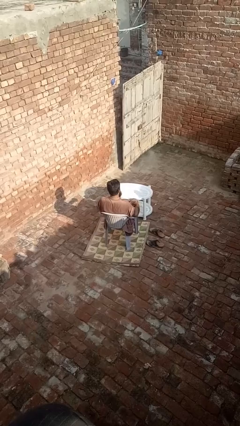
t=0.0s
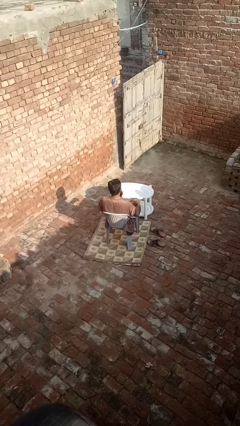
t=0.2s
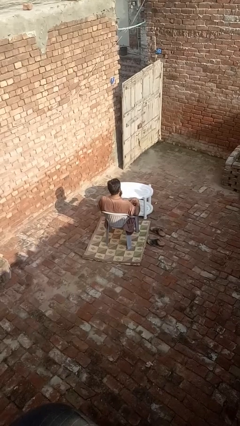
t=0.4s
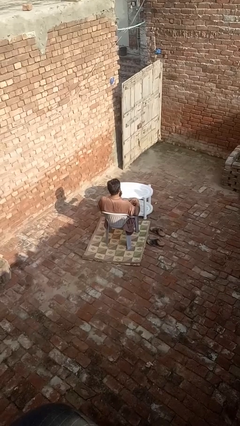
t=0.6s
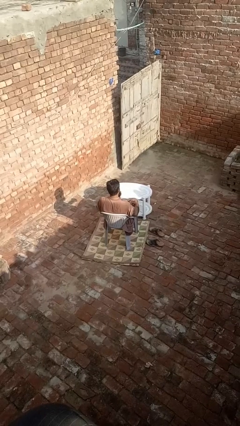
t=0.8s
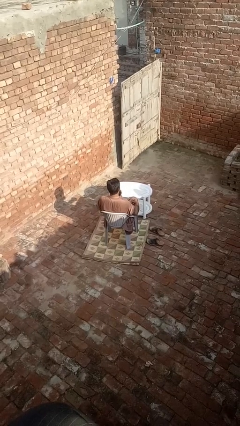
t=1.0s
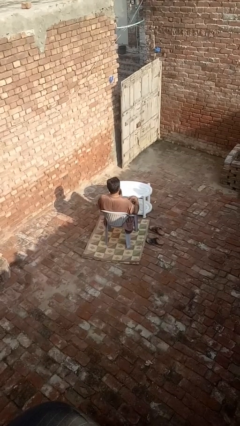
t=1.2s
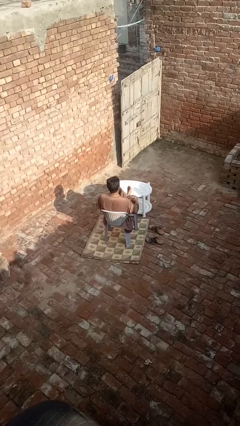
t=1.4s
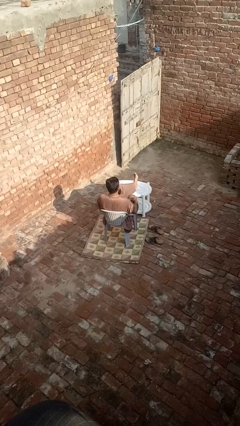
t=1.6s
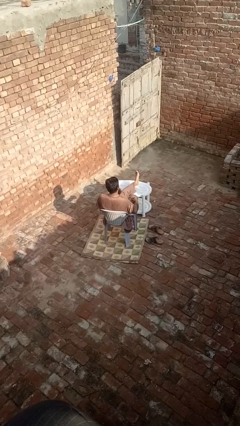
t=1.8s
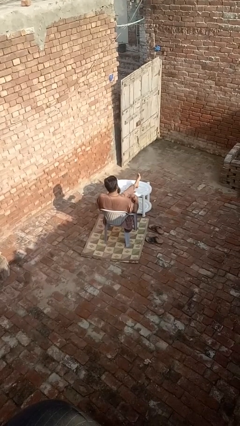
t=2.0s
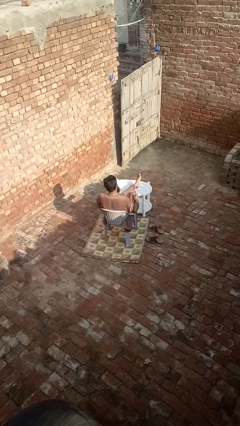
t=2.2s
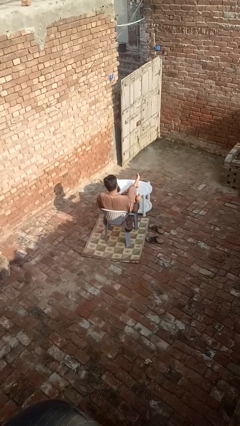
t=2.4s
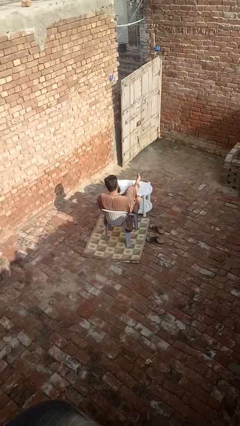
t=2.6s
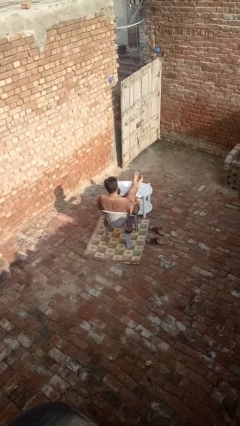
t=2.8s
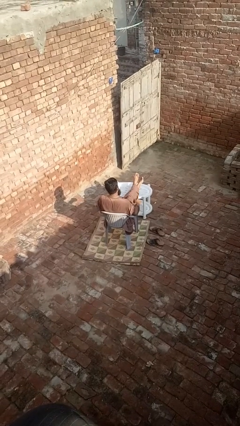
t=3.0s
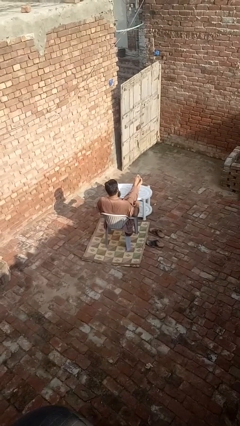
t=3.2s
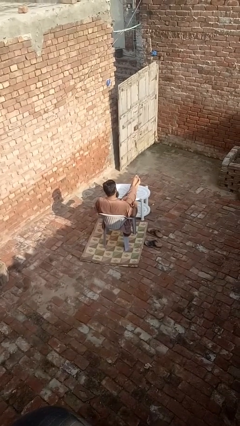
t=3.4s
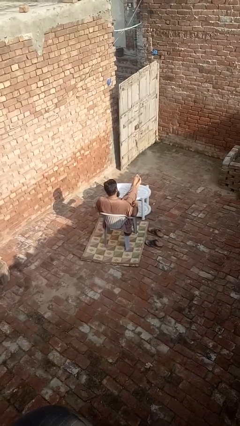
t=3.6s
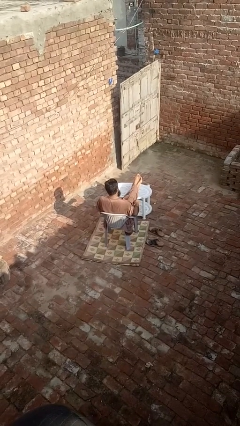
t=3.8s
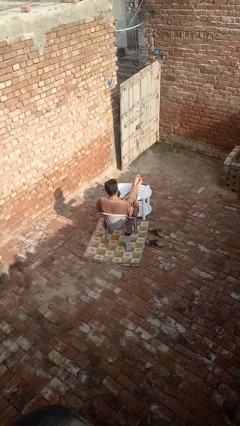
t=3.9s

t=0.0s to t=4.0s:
person puts feet up

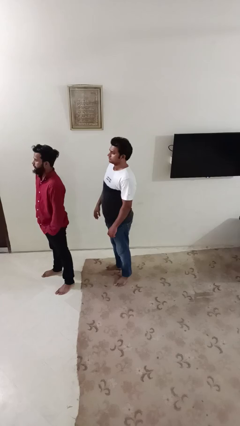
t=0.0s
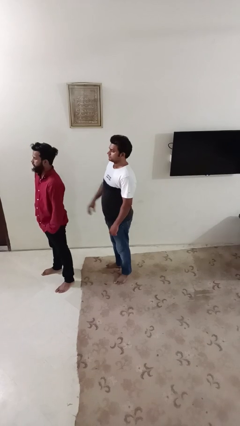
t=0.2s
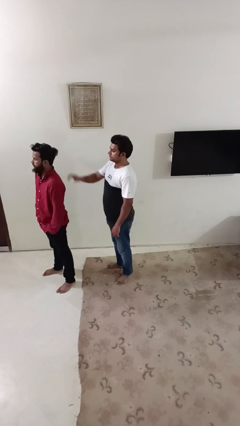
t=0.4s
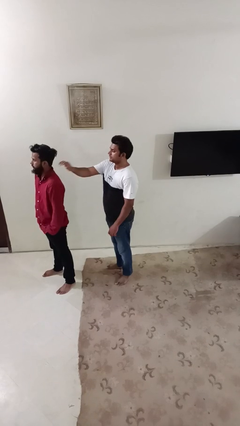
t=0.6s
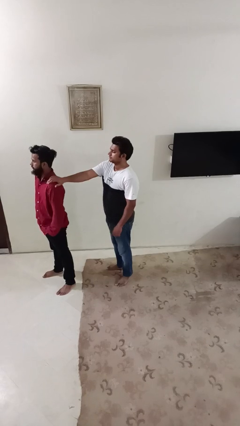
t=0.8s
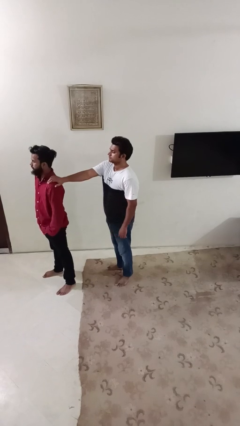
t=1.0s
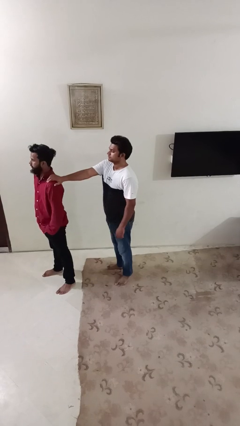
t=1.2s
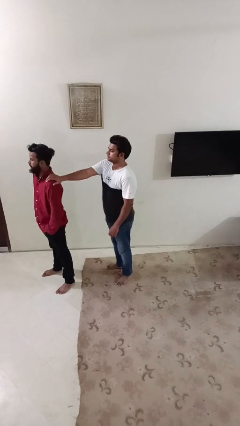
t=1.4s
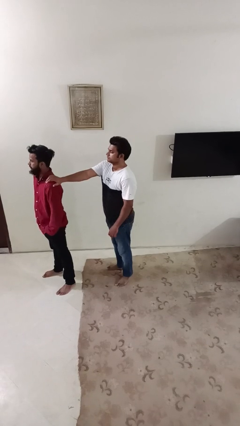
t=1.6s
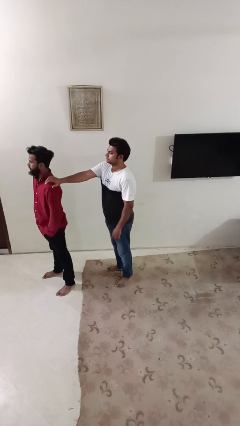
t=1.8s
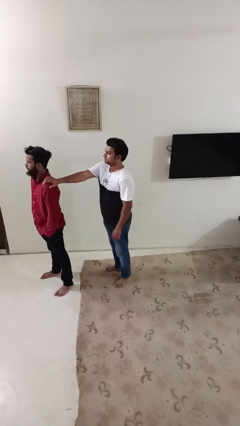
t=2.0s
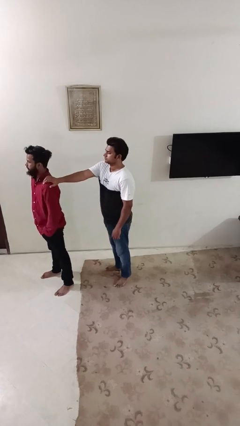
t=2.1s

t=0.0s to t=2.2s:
person grabs person by shoulder

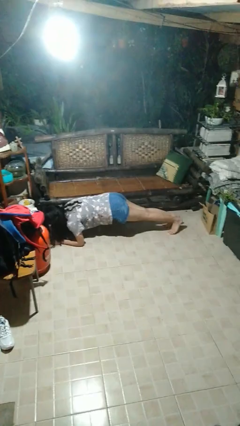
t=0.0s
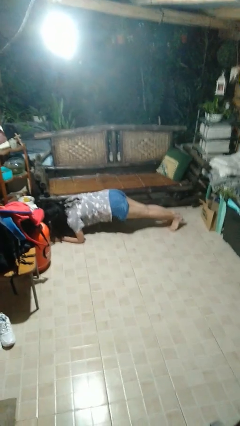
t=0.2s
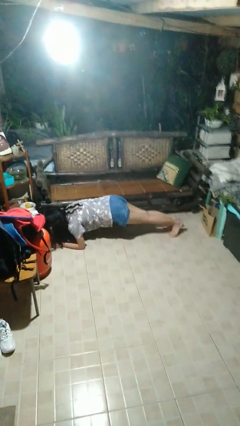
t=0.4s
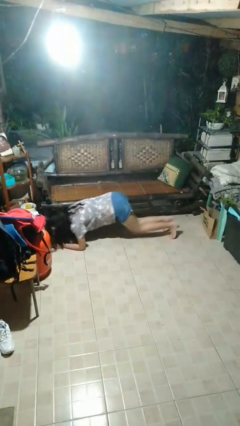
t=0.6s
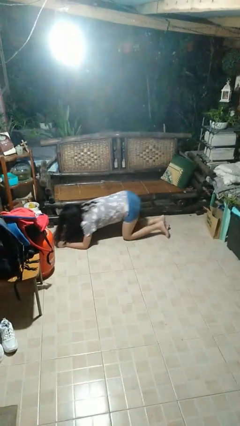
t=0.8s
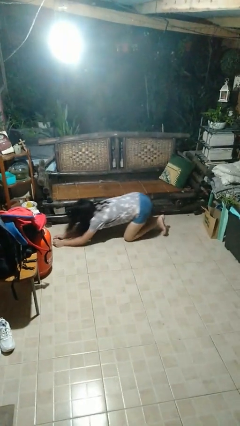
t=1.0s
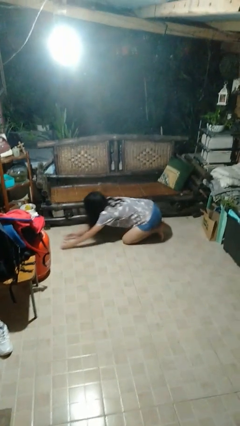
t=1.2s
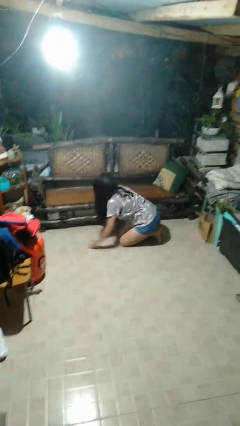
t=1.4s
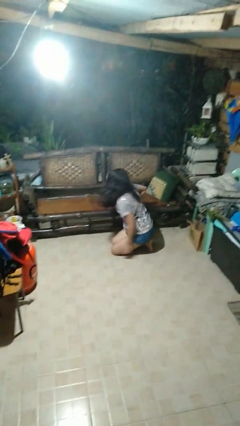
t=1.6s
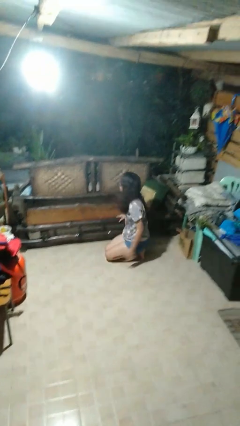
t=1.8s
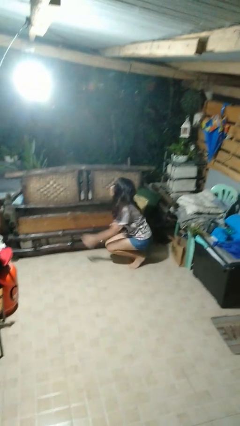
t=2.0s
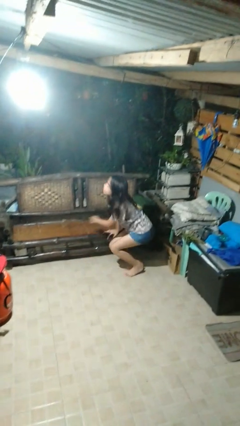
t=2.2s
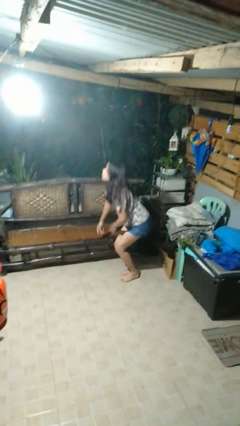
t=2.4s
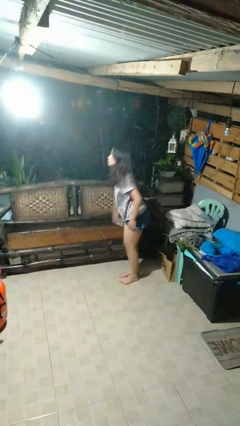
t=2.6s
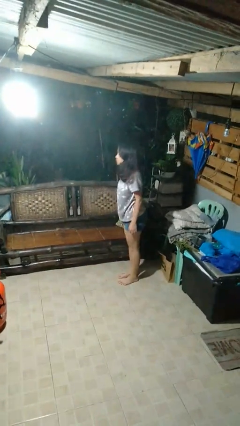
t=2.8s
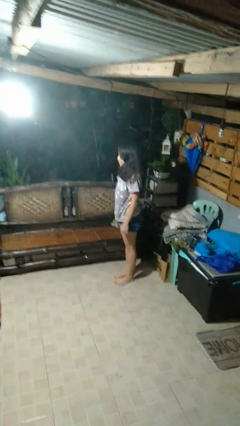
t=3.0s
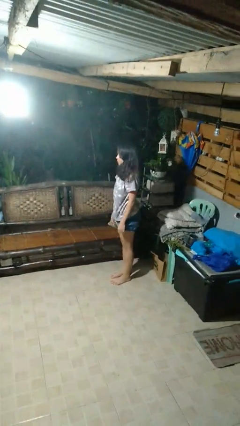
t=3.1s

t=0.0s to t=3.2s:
person stands up from floor

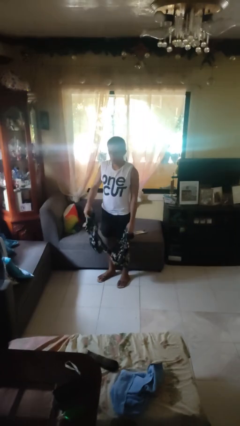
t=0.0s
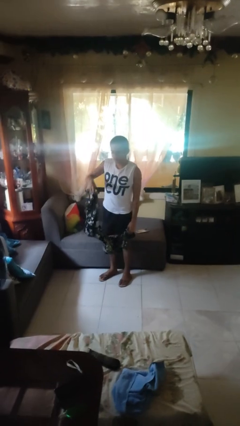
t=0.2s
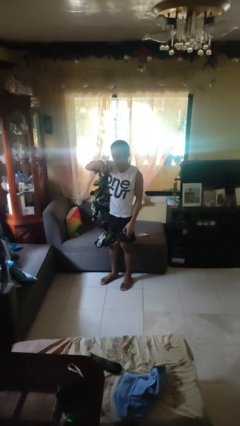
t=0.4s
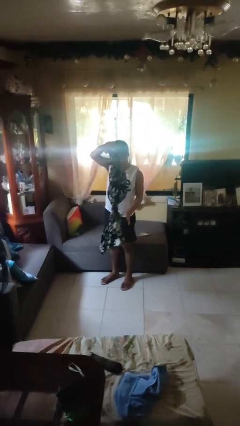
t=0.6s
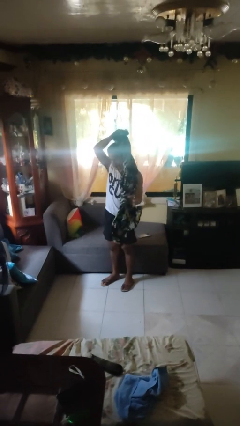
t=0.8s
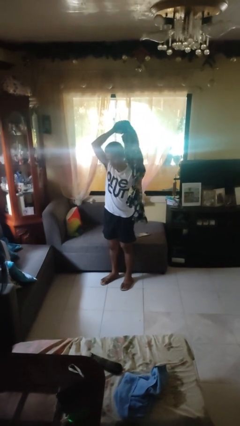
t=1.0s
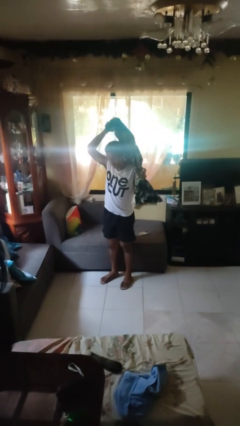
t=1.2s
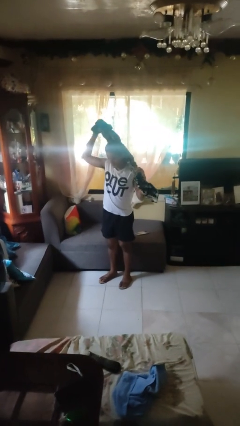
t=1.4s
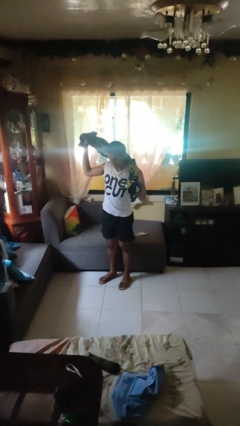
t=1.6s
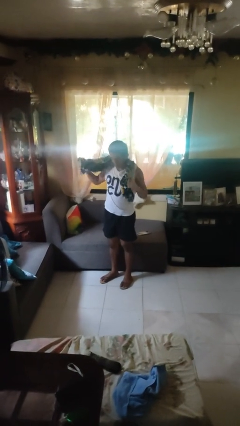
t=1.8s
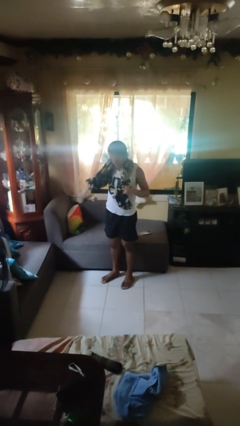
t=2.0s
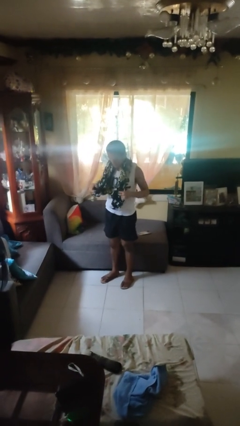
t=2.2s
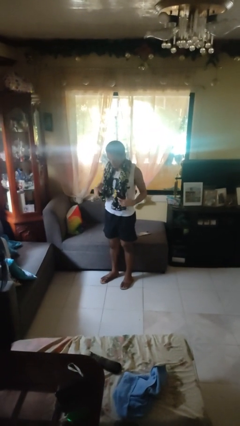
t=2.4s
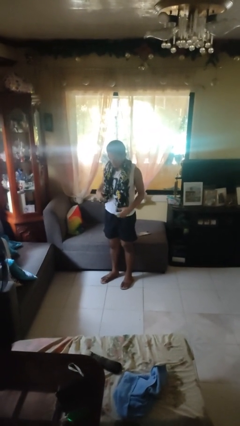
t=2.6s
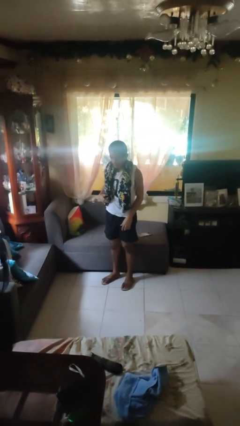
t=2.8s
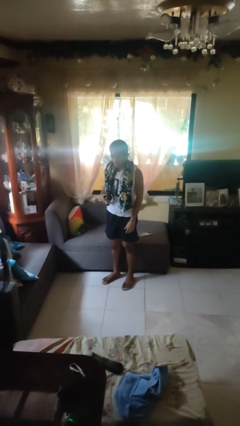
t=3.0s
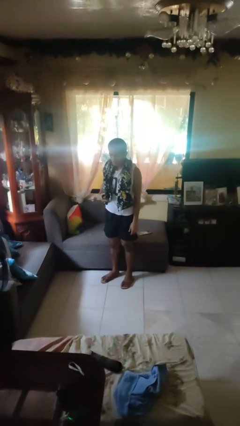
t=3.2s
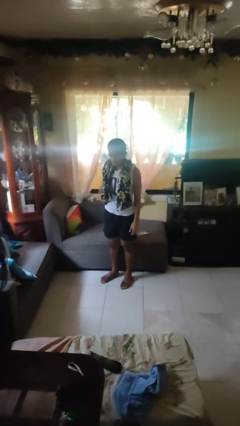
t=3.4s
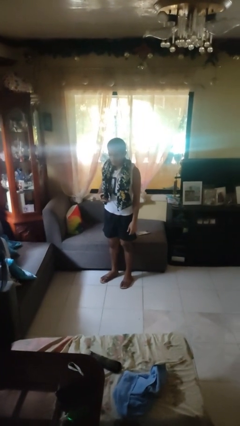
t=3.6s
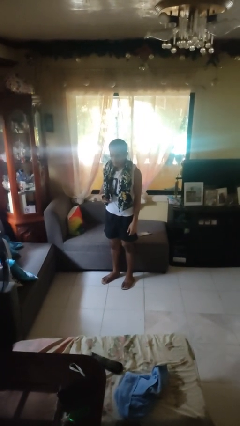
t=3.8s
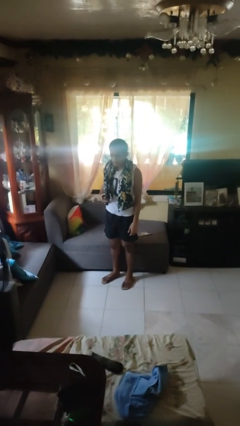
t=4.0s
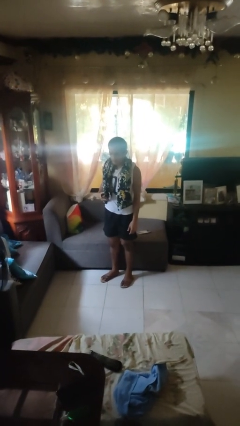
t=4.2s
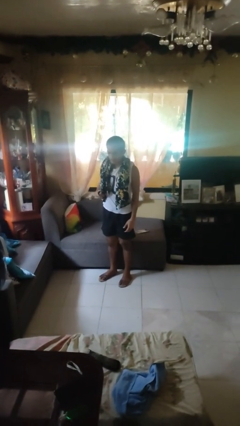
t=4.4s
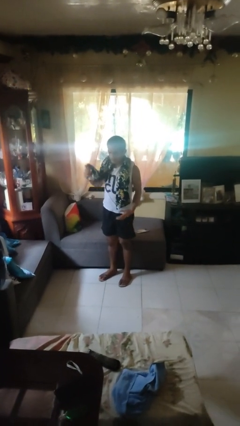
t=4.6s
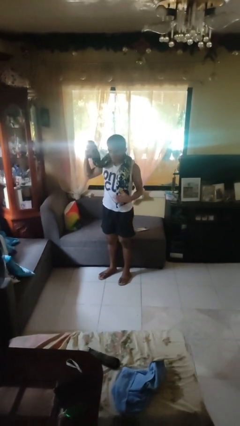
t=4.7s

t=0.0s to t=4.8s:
person puts on scarf

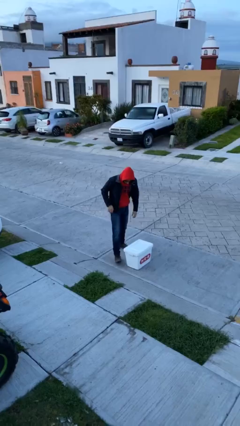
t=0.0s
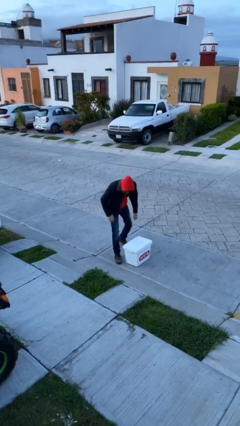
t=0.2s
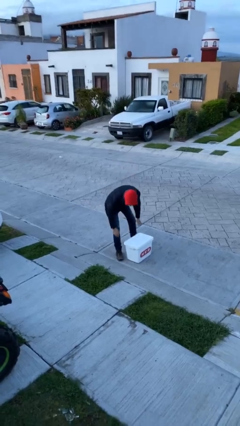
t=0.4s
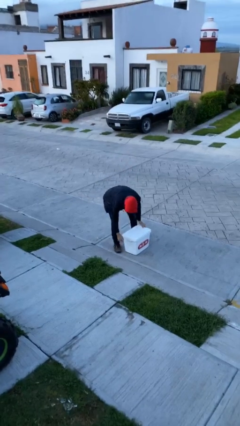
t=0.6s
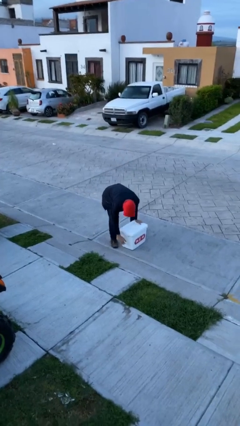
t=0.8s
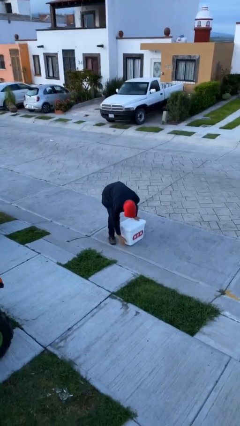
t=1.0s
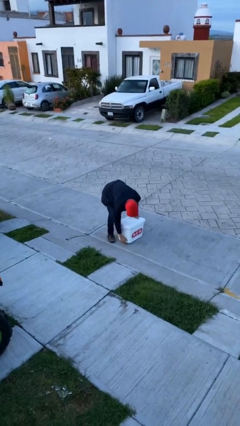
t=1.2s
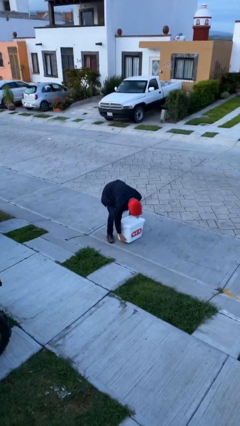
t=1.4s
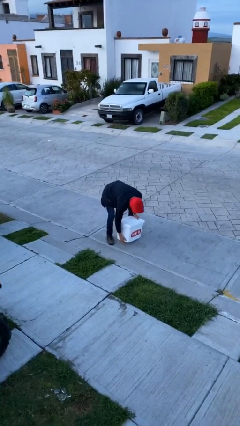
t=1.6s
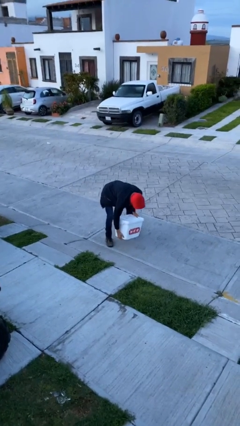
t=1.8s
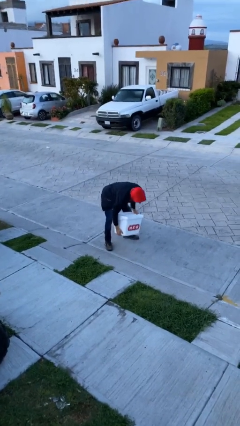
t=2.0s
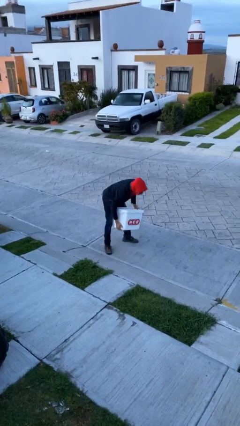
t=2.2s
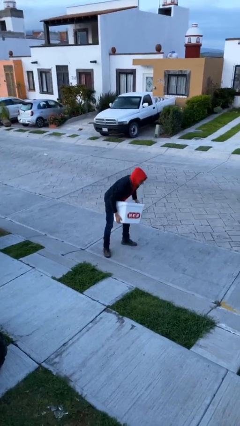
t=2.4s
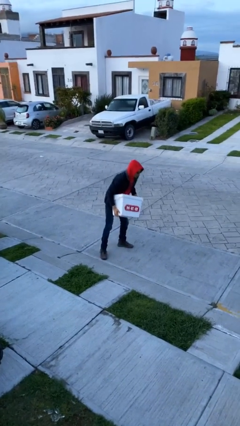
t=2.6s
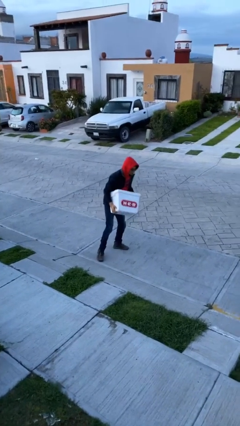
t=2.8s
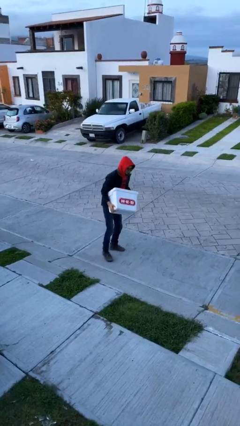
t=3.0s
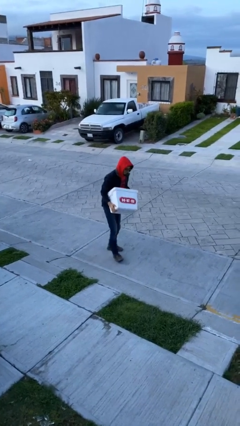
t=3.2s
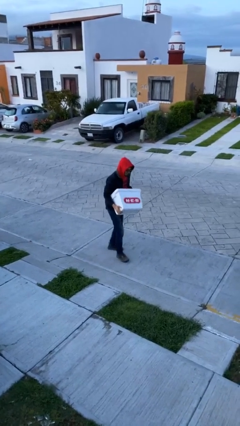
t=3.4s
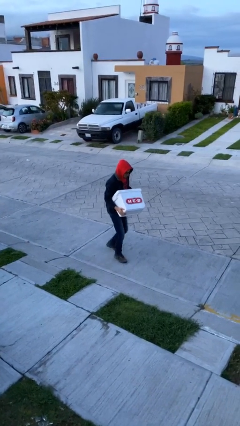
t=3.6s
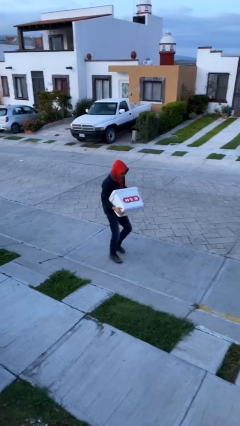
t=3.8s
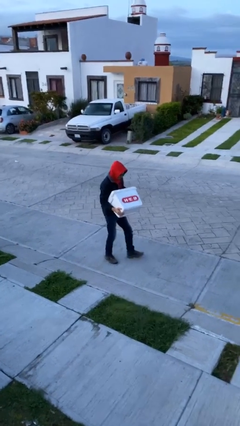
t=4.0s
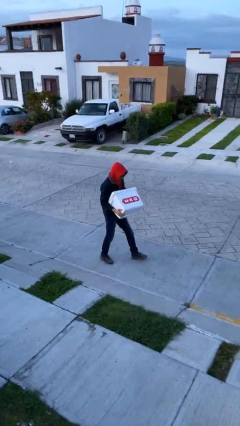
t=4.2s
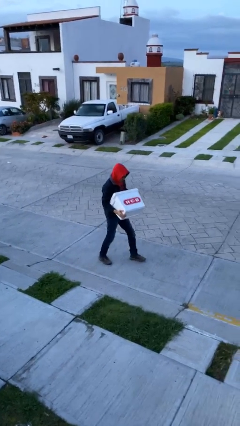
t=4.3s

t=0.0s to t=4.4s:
person picks up object from floor
